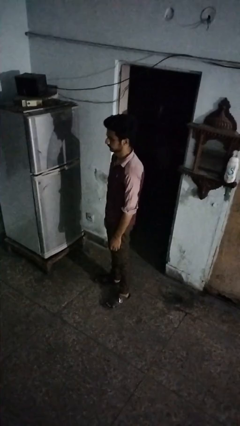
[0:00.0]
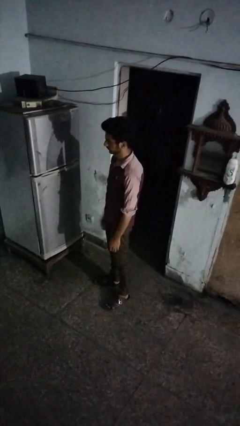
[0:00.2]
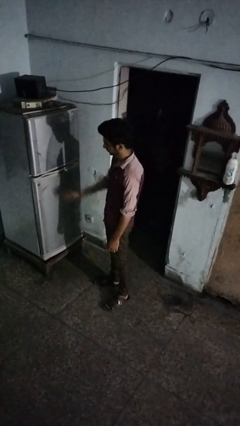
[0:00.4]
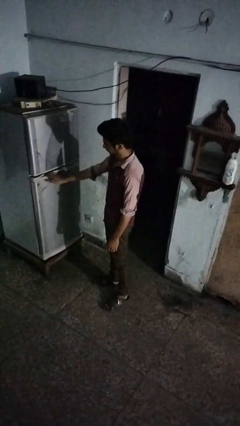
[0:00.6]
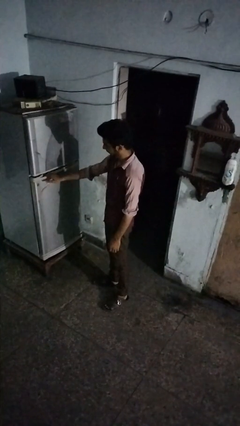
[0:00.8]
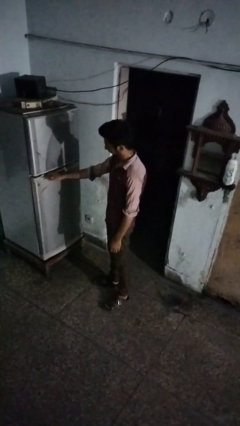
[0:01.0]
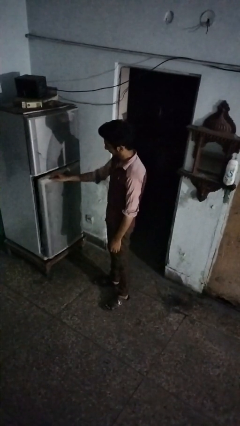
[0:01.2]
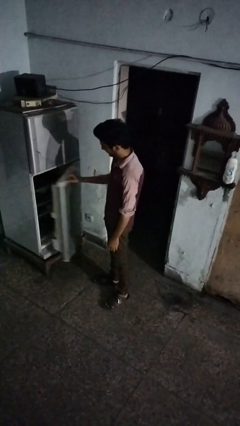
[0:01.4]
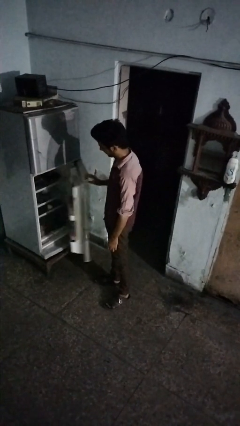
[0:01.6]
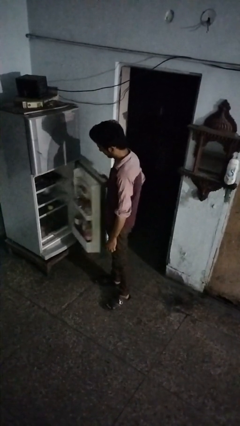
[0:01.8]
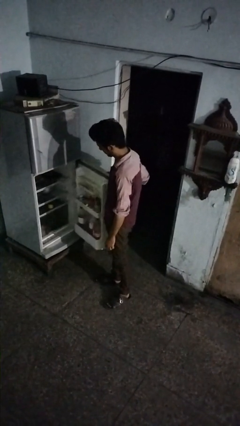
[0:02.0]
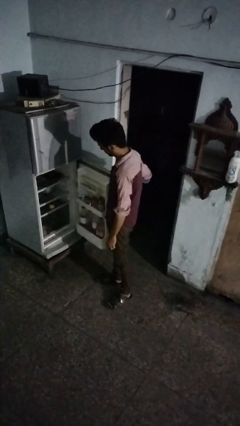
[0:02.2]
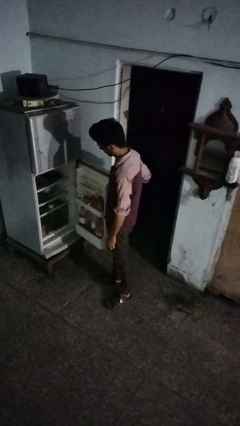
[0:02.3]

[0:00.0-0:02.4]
person opens refrigerator

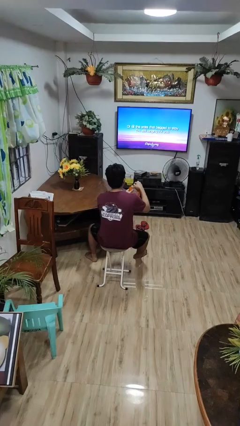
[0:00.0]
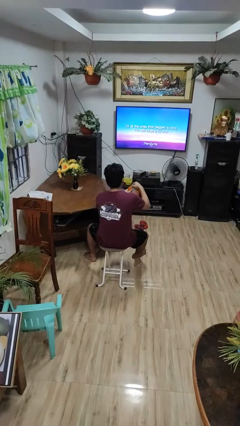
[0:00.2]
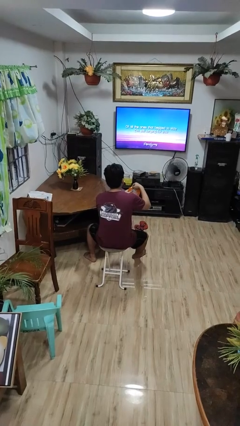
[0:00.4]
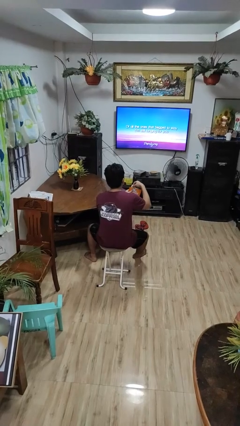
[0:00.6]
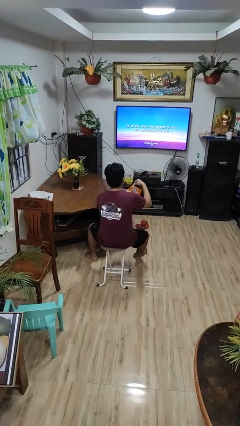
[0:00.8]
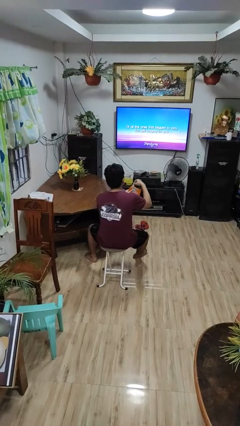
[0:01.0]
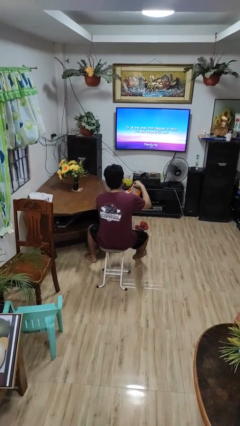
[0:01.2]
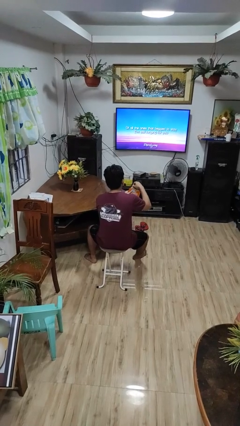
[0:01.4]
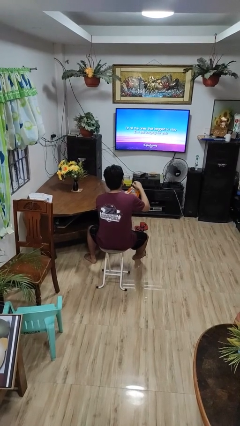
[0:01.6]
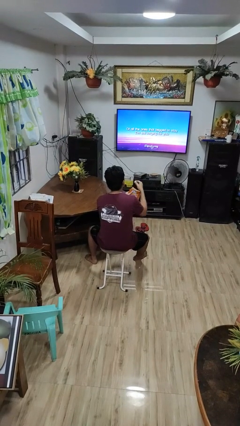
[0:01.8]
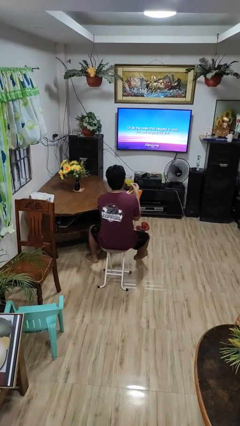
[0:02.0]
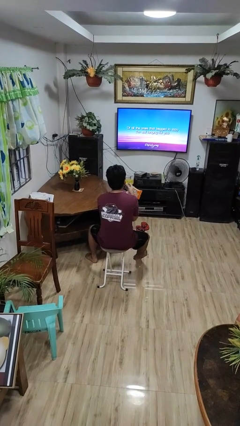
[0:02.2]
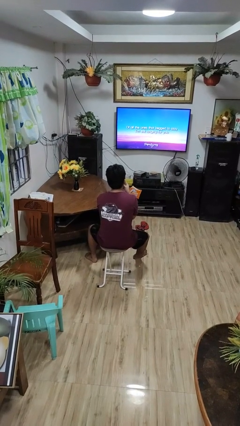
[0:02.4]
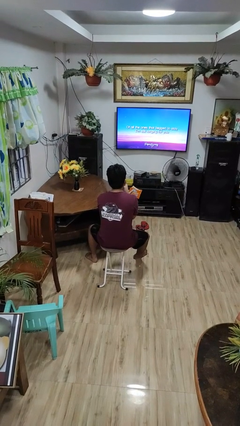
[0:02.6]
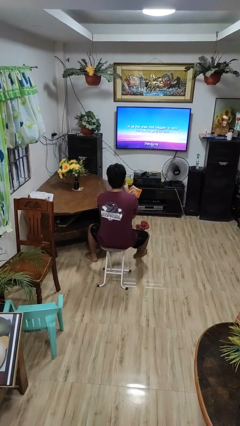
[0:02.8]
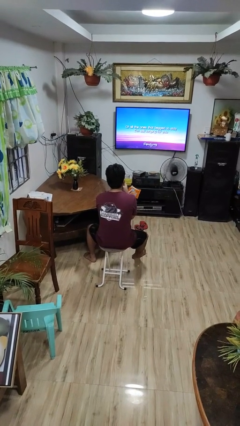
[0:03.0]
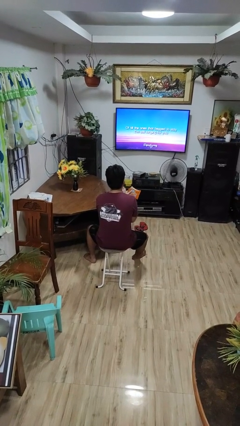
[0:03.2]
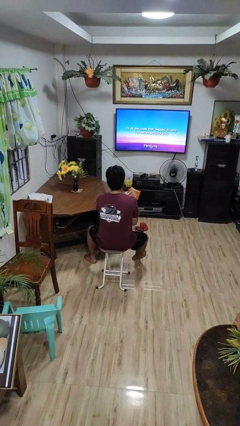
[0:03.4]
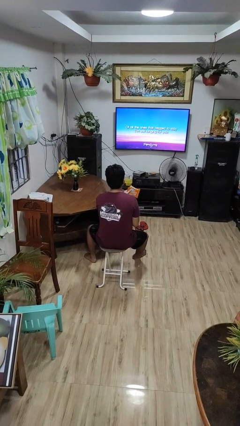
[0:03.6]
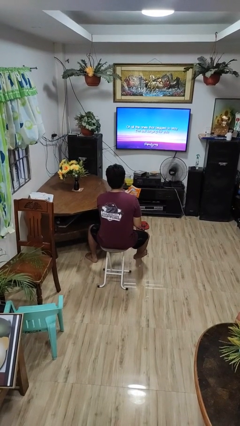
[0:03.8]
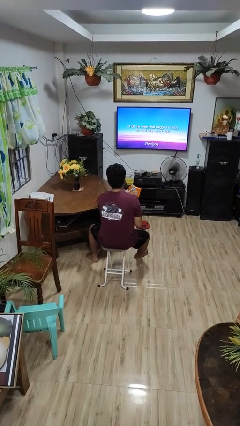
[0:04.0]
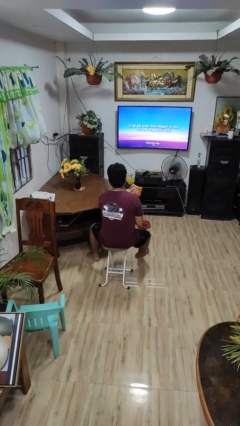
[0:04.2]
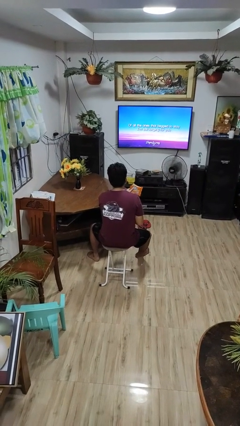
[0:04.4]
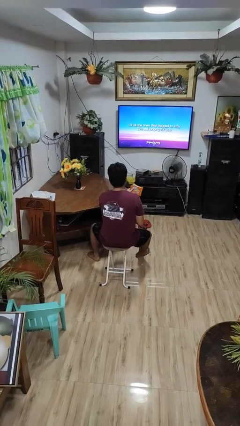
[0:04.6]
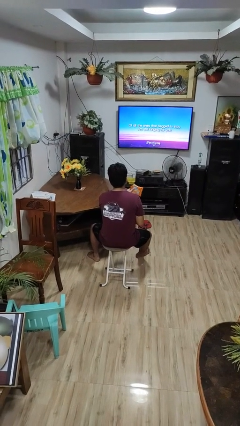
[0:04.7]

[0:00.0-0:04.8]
person eats snack from bag

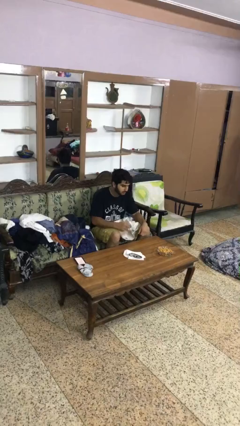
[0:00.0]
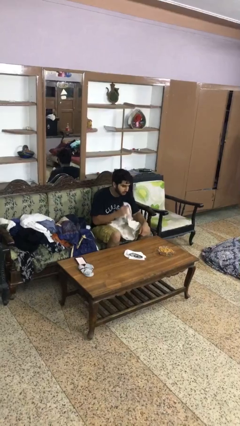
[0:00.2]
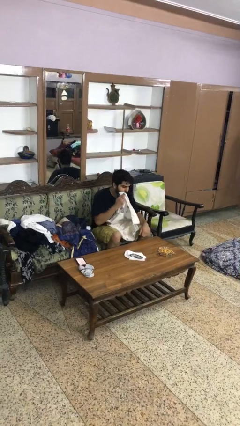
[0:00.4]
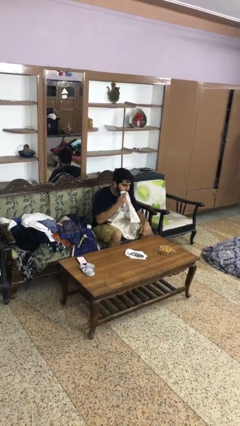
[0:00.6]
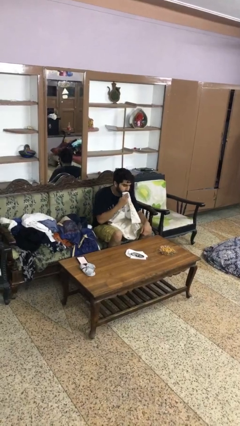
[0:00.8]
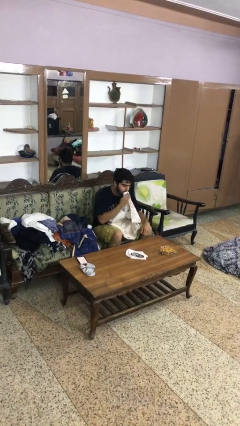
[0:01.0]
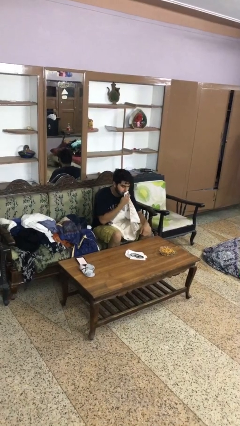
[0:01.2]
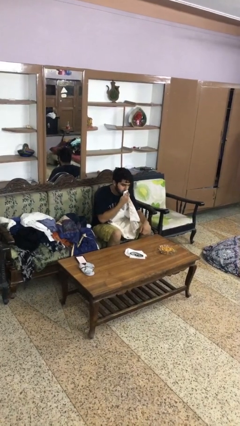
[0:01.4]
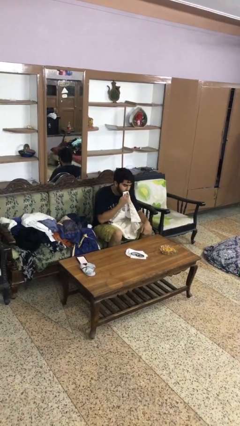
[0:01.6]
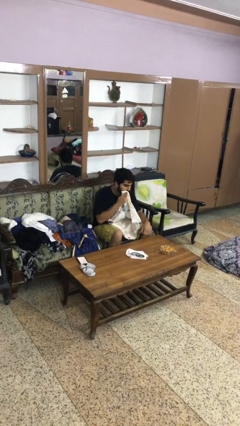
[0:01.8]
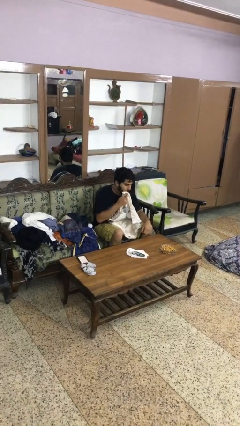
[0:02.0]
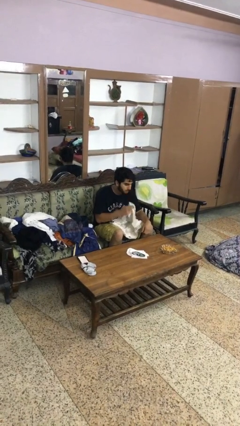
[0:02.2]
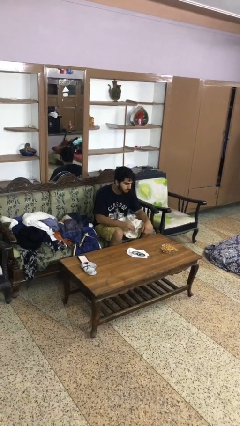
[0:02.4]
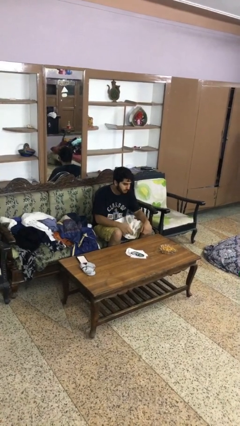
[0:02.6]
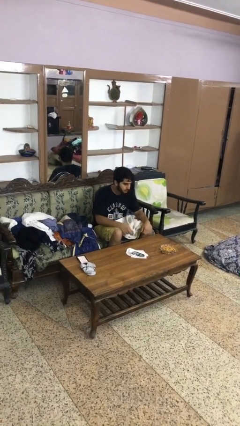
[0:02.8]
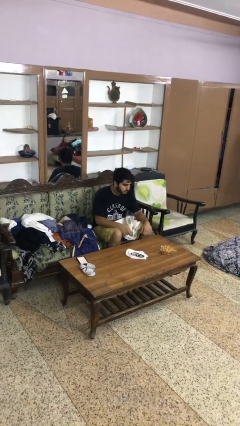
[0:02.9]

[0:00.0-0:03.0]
person wipes mouth with napkin

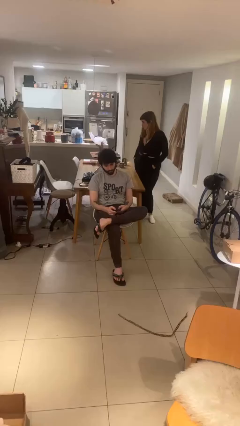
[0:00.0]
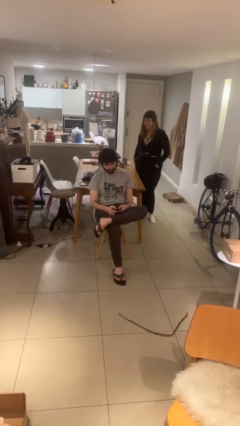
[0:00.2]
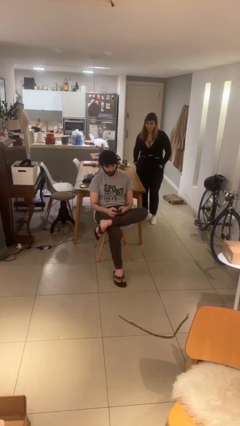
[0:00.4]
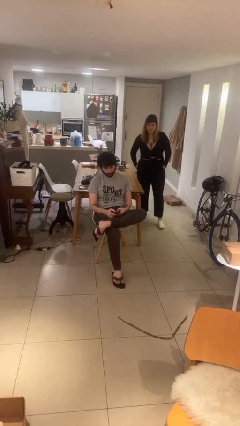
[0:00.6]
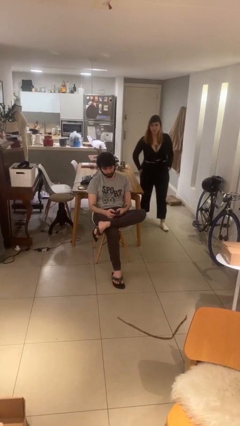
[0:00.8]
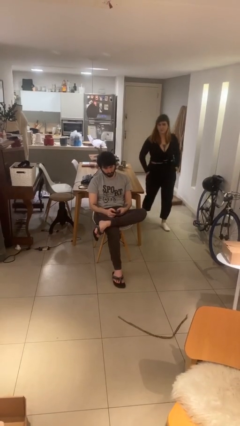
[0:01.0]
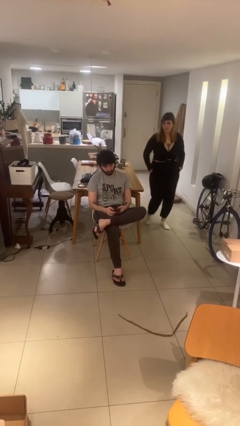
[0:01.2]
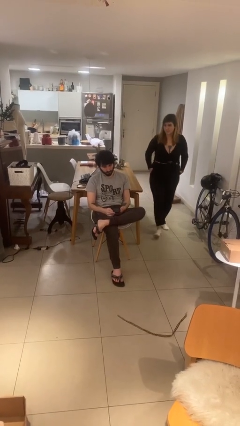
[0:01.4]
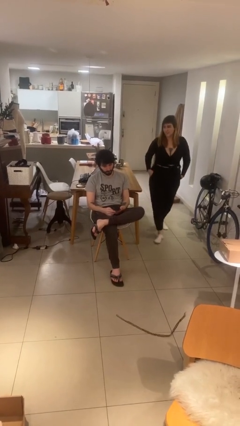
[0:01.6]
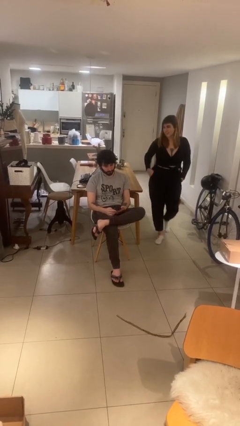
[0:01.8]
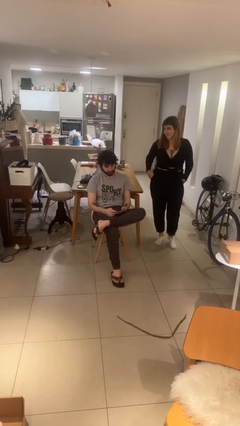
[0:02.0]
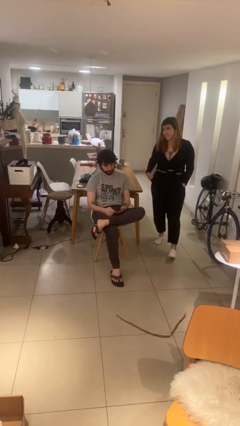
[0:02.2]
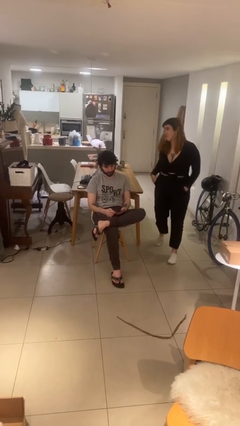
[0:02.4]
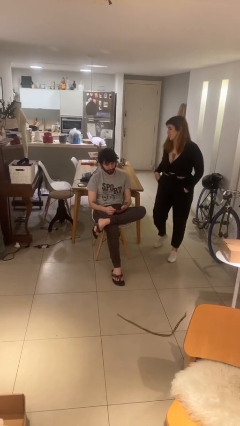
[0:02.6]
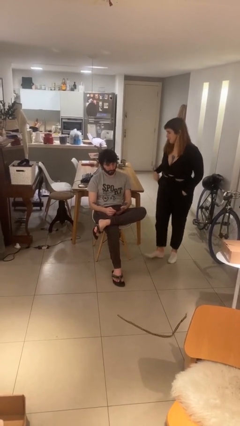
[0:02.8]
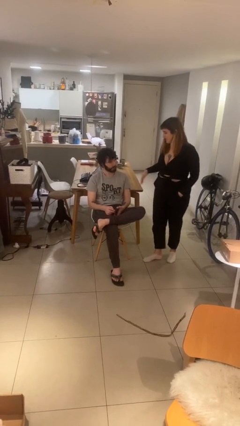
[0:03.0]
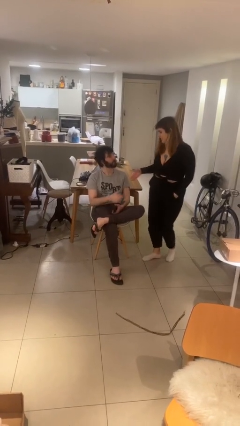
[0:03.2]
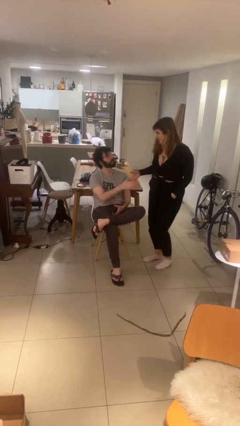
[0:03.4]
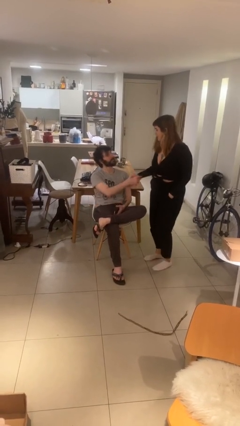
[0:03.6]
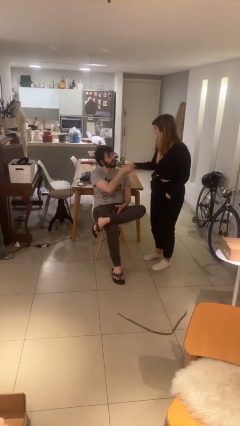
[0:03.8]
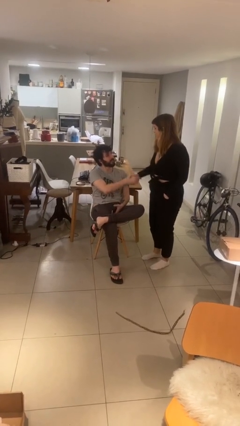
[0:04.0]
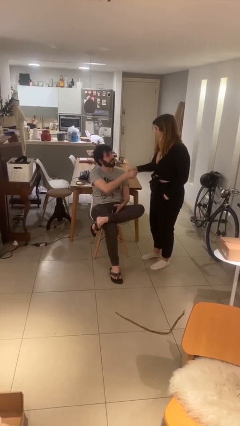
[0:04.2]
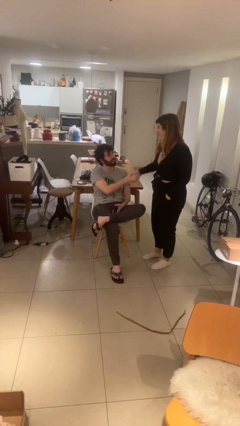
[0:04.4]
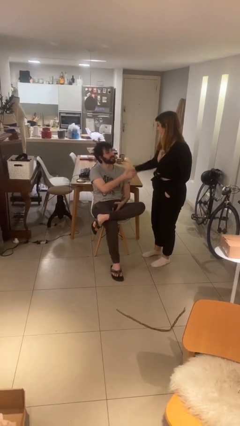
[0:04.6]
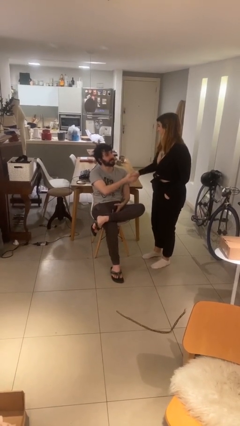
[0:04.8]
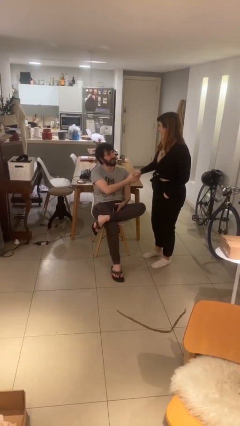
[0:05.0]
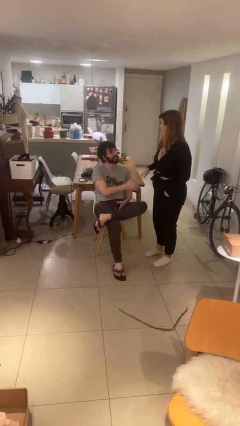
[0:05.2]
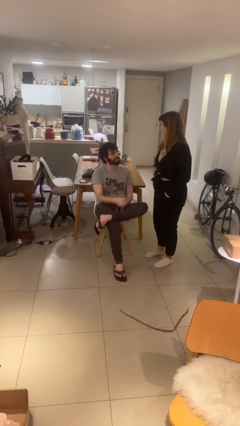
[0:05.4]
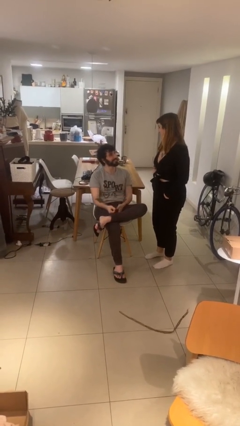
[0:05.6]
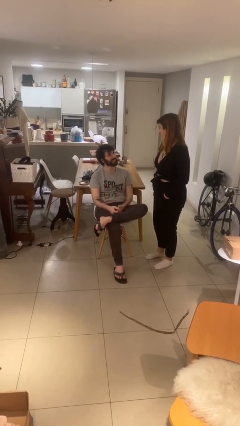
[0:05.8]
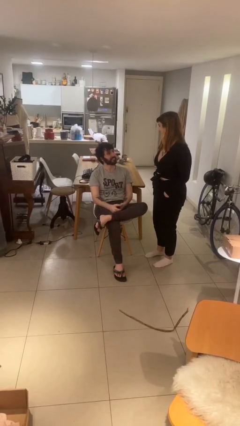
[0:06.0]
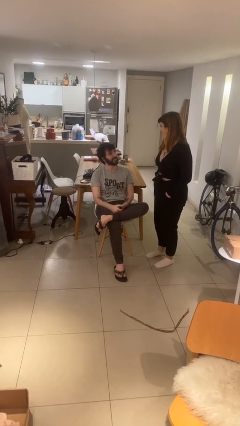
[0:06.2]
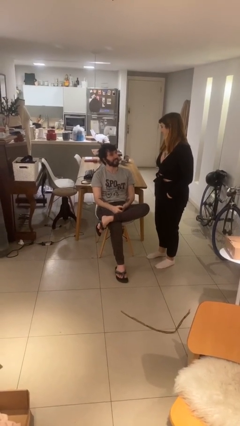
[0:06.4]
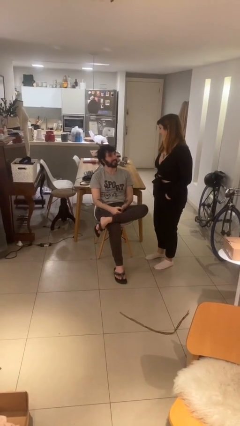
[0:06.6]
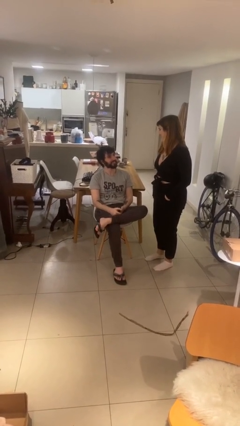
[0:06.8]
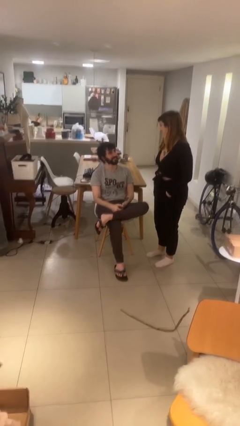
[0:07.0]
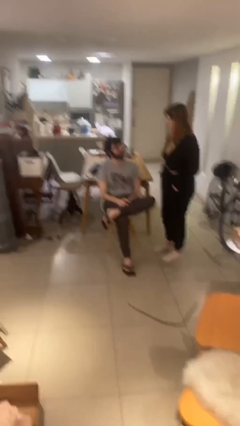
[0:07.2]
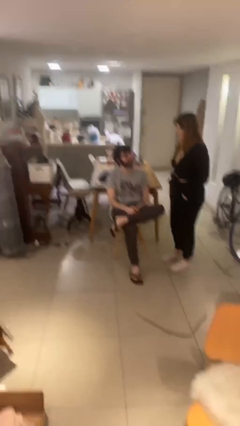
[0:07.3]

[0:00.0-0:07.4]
person shakes hand

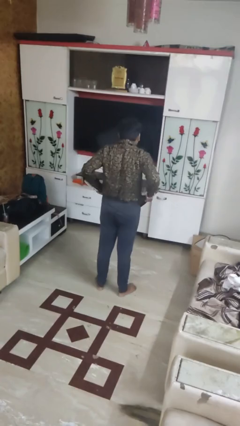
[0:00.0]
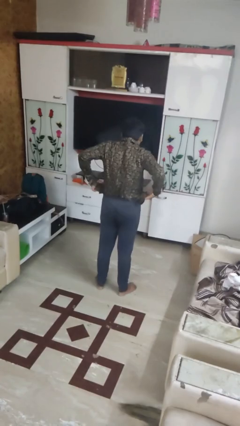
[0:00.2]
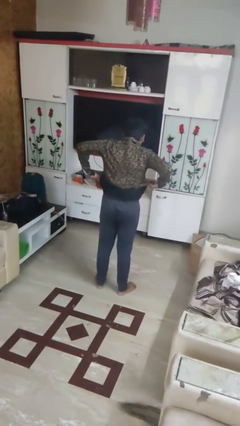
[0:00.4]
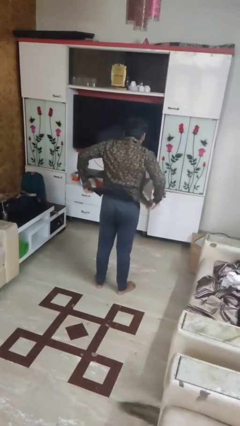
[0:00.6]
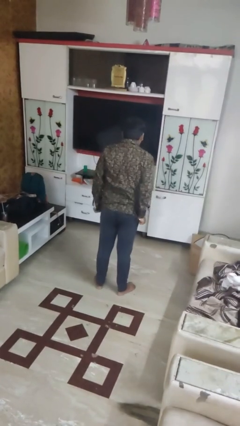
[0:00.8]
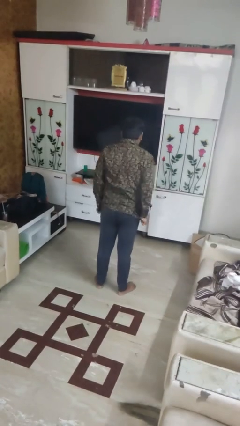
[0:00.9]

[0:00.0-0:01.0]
person untucks shirt
